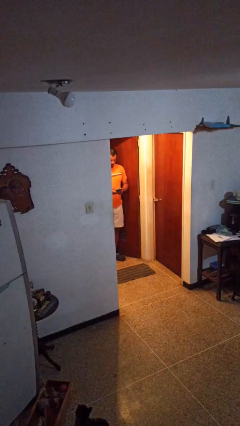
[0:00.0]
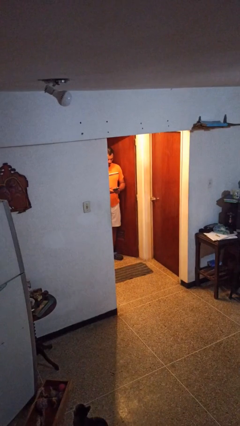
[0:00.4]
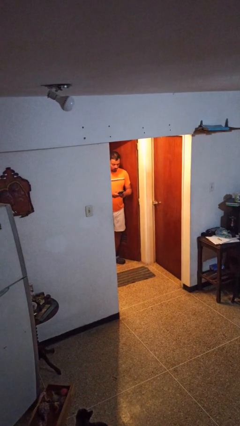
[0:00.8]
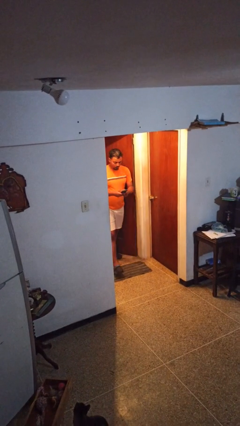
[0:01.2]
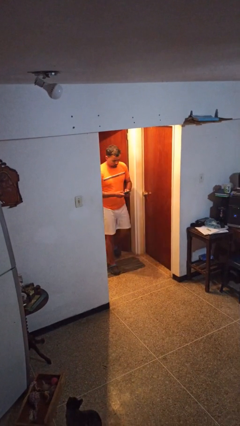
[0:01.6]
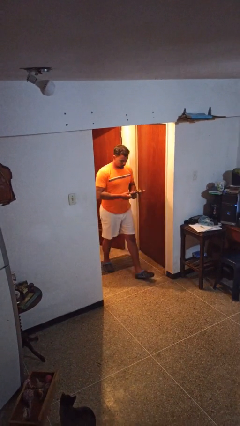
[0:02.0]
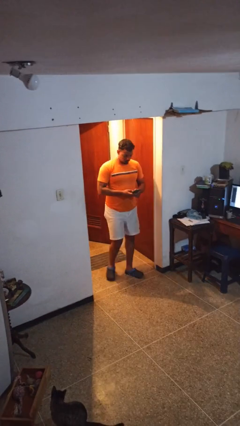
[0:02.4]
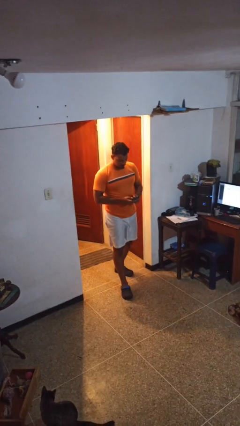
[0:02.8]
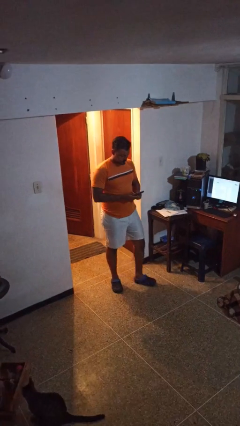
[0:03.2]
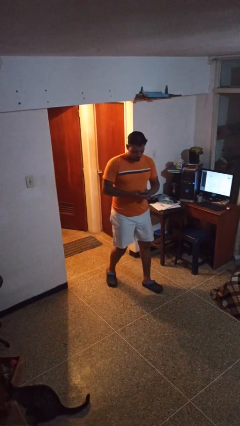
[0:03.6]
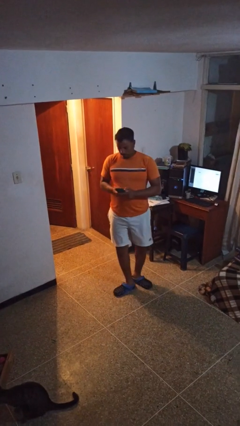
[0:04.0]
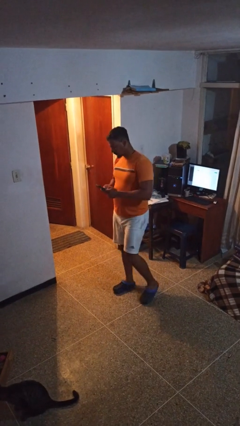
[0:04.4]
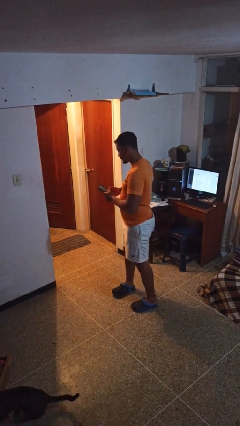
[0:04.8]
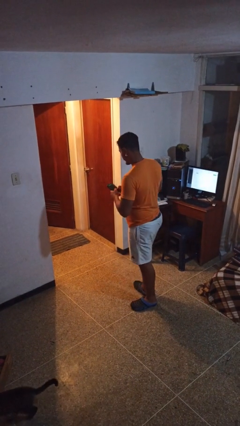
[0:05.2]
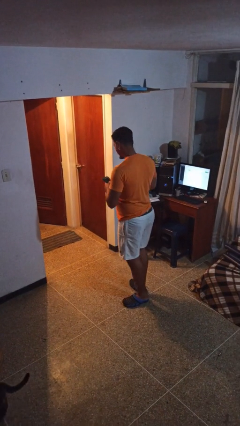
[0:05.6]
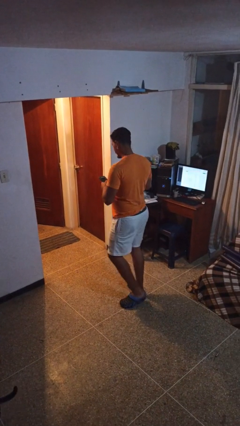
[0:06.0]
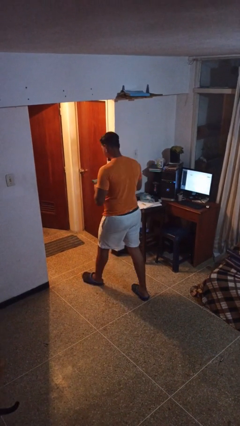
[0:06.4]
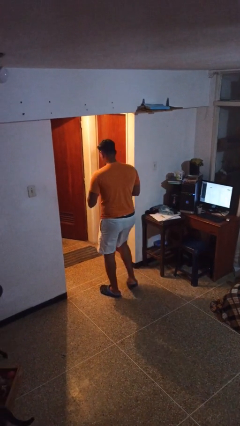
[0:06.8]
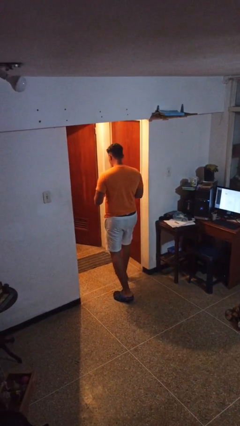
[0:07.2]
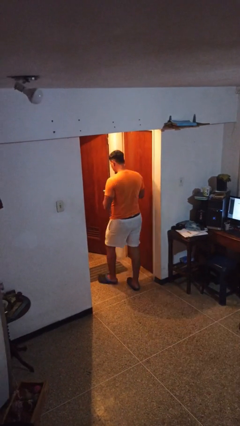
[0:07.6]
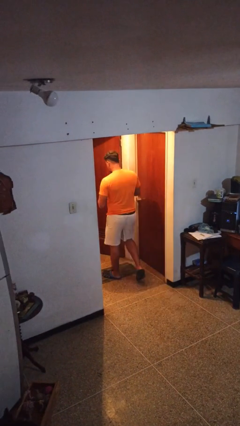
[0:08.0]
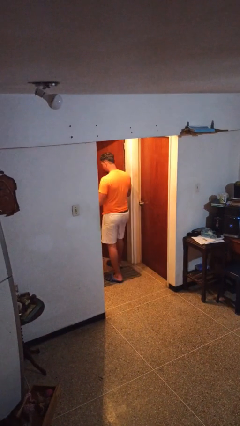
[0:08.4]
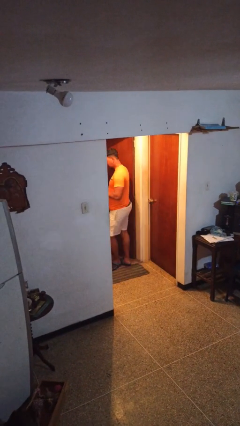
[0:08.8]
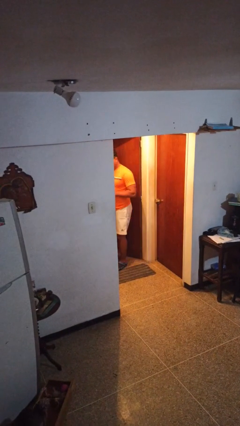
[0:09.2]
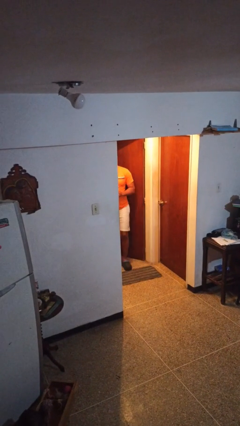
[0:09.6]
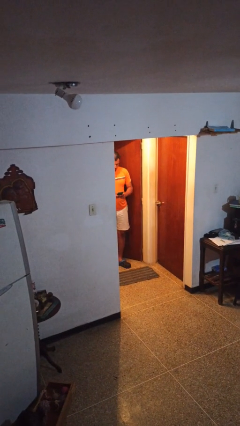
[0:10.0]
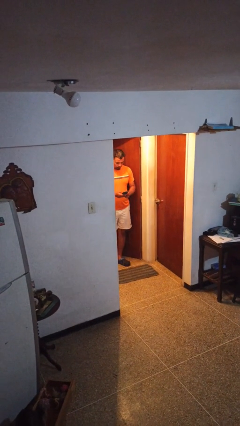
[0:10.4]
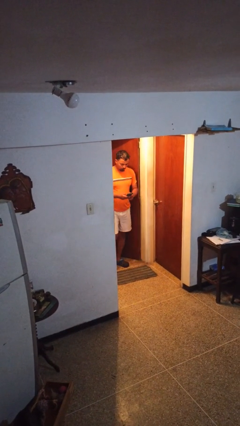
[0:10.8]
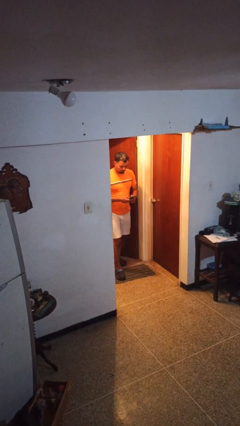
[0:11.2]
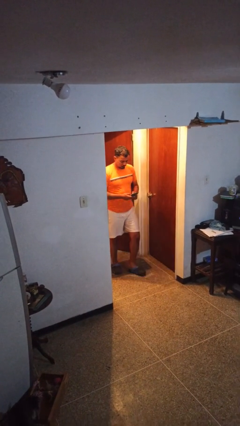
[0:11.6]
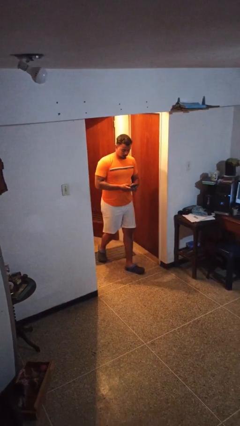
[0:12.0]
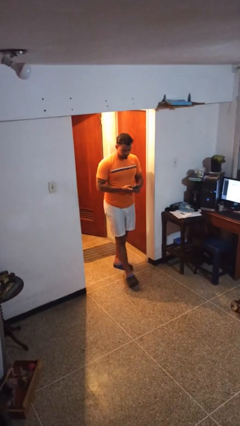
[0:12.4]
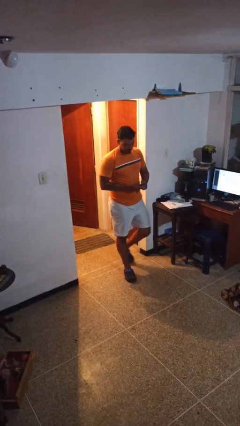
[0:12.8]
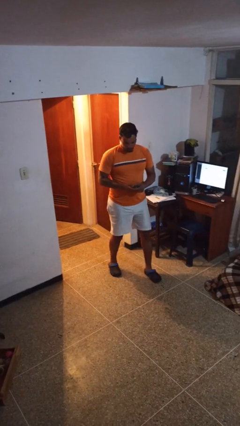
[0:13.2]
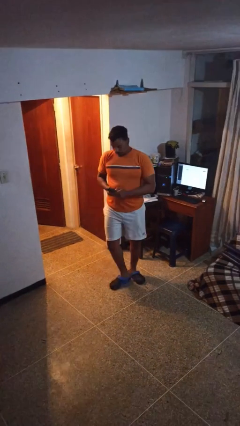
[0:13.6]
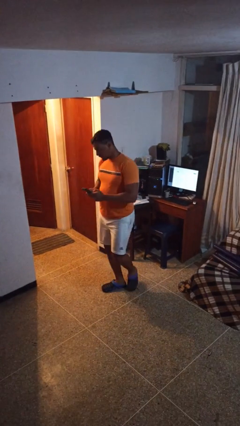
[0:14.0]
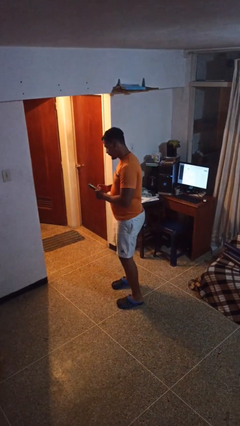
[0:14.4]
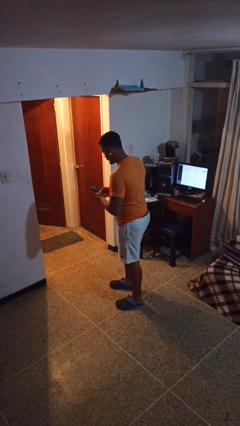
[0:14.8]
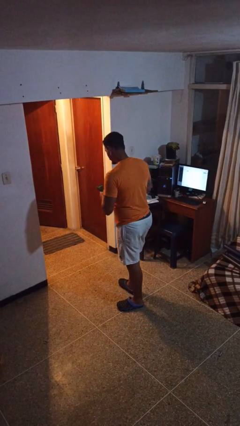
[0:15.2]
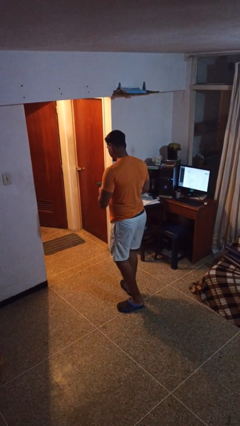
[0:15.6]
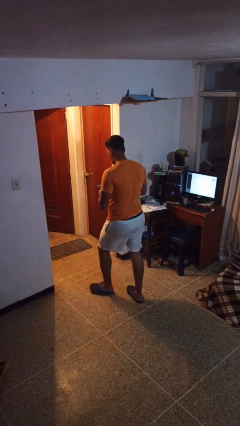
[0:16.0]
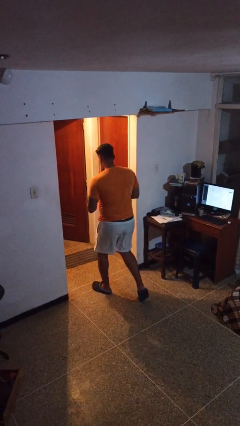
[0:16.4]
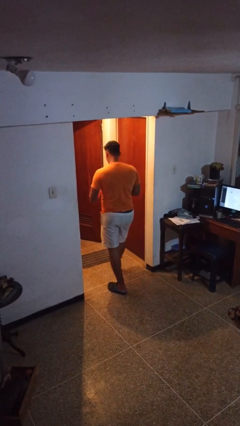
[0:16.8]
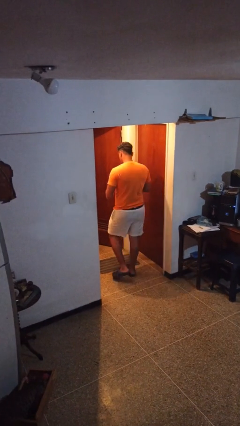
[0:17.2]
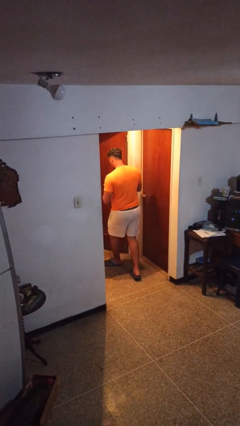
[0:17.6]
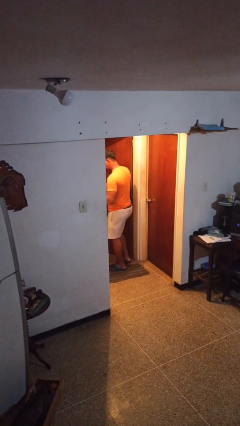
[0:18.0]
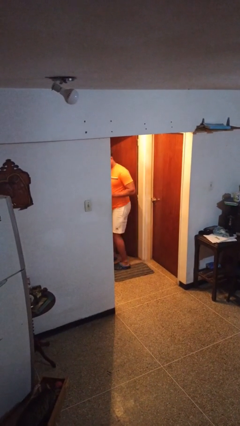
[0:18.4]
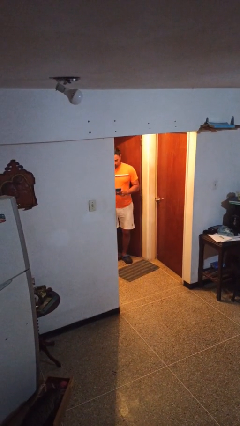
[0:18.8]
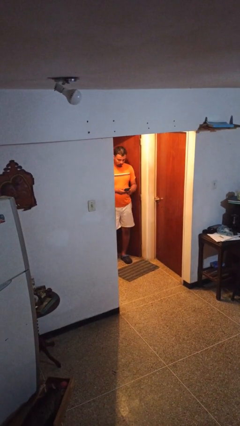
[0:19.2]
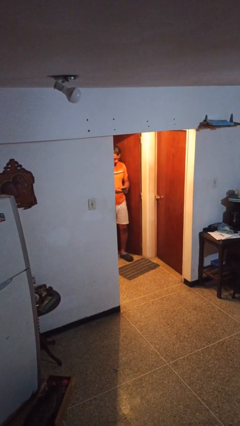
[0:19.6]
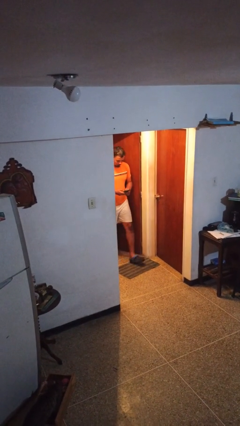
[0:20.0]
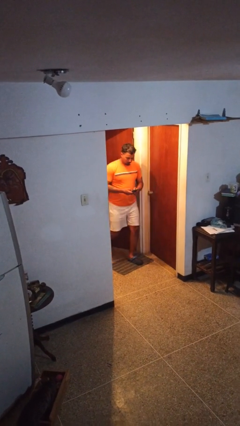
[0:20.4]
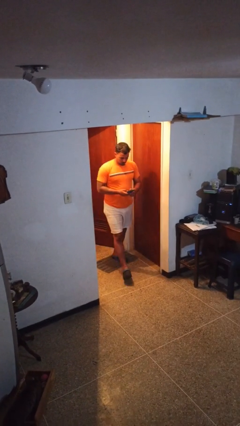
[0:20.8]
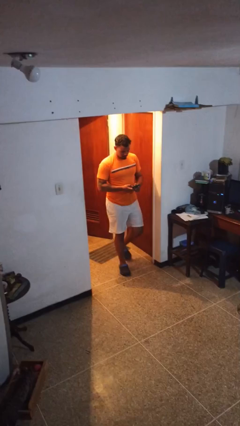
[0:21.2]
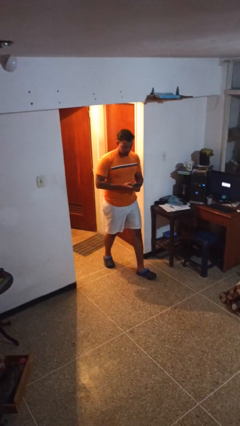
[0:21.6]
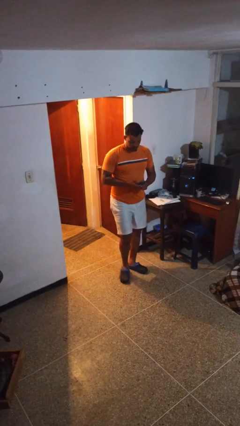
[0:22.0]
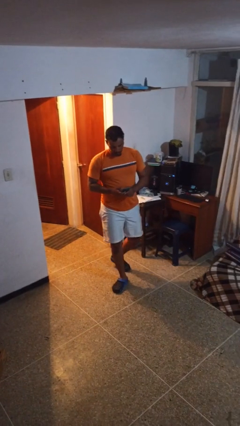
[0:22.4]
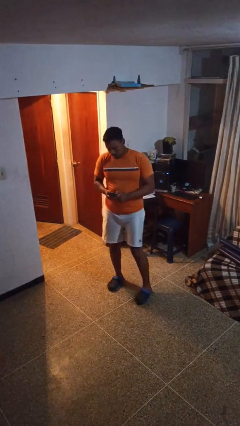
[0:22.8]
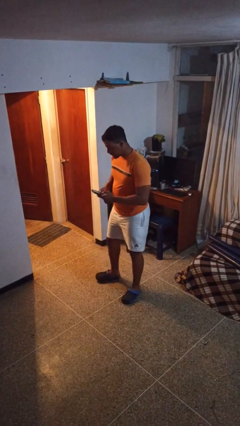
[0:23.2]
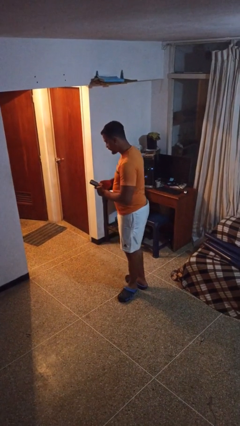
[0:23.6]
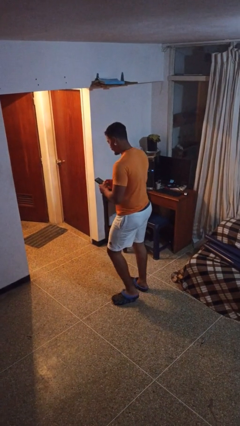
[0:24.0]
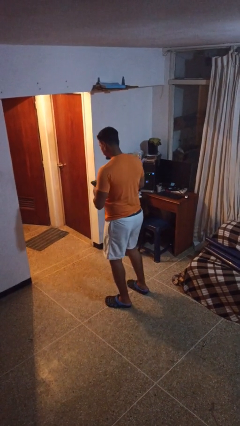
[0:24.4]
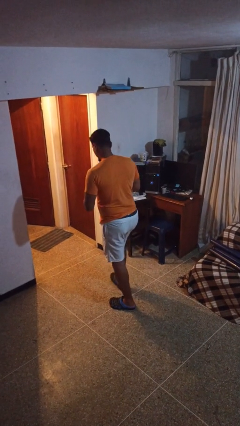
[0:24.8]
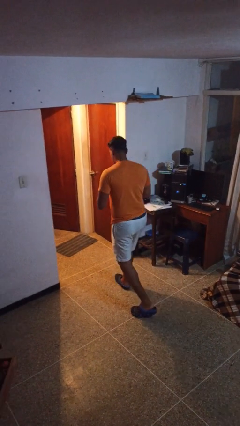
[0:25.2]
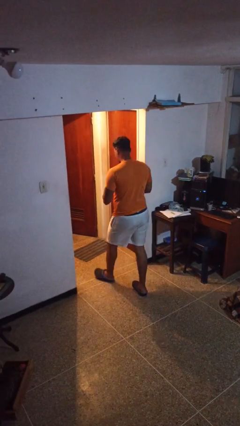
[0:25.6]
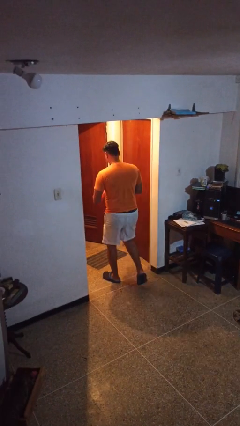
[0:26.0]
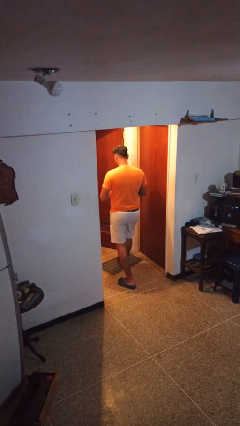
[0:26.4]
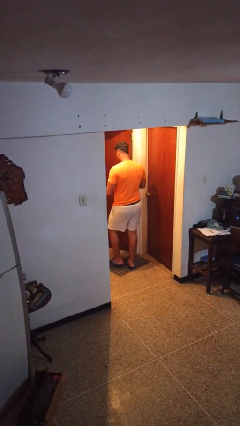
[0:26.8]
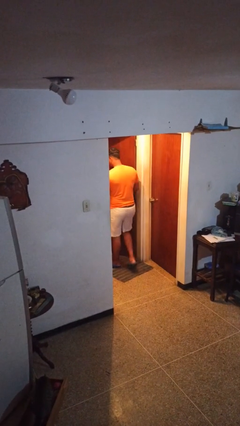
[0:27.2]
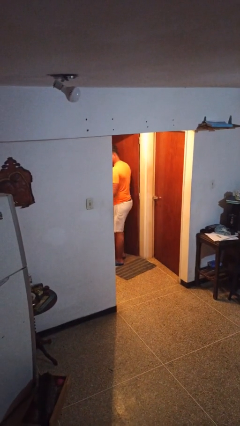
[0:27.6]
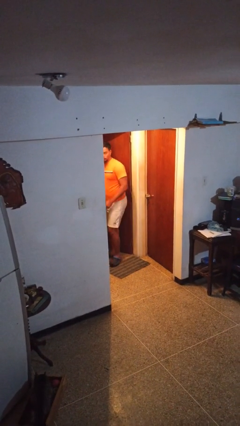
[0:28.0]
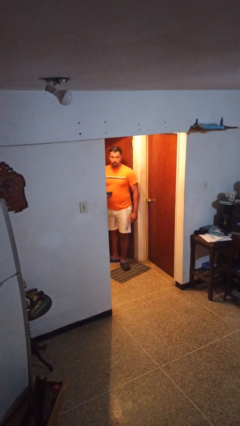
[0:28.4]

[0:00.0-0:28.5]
person texts on phone

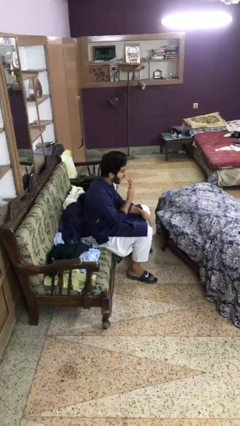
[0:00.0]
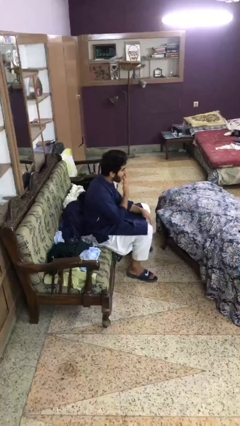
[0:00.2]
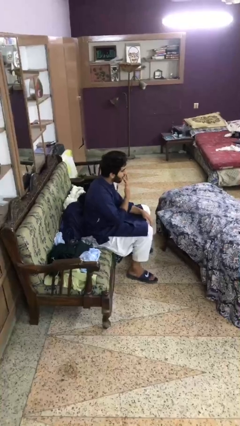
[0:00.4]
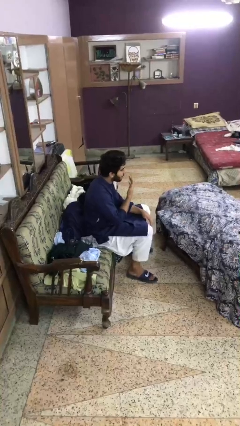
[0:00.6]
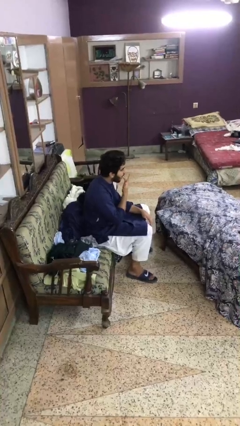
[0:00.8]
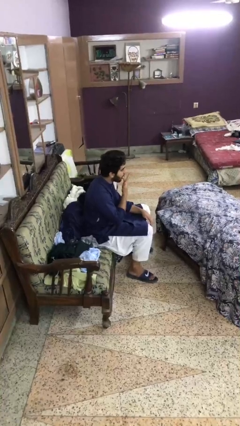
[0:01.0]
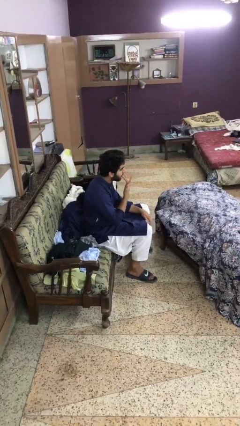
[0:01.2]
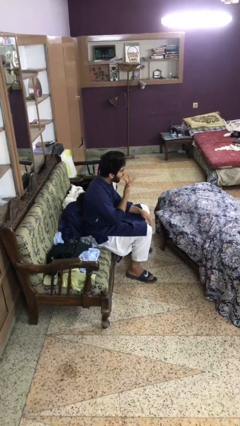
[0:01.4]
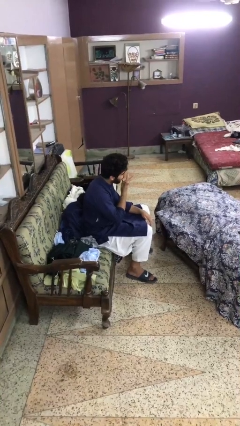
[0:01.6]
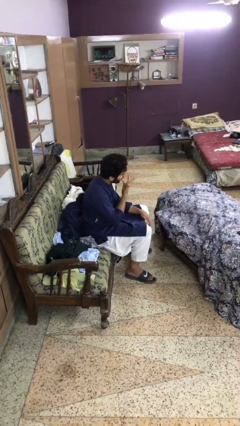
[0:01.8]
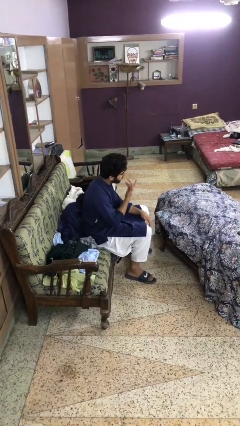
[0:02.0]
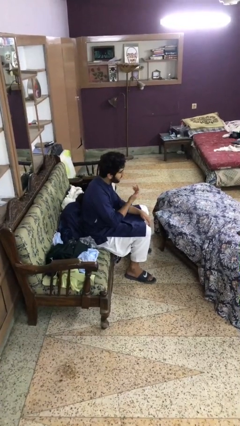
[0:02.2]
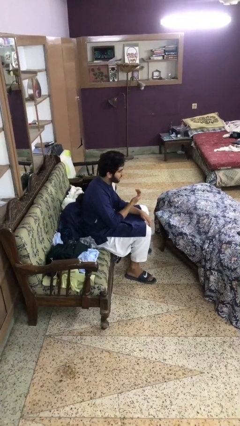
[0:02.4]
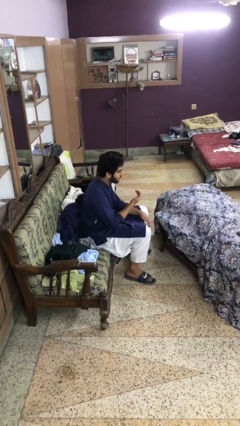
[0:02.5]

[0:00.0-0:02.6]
person licks fingers

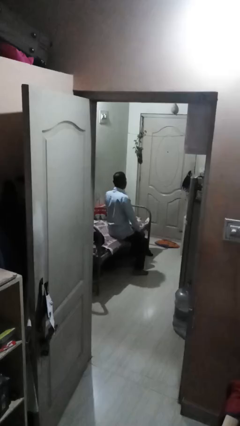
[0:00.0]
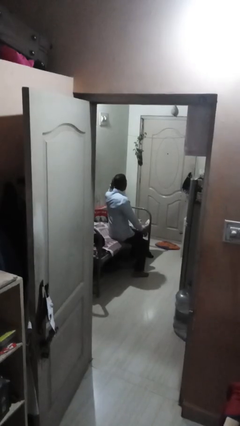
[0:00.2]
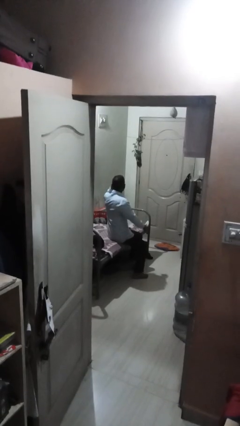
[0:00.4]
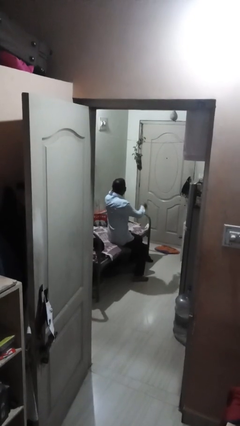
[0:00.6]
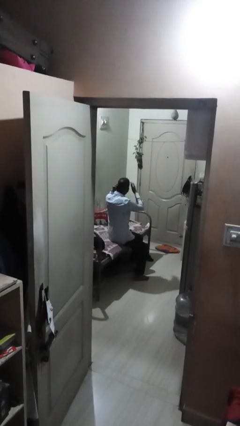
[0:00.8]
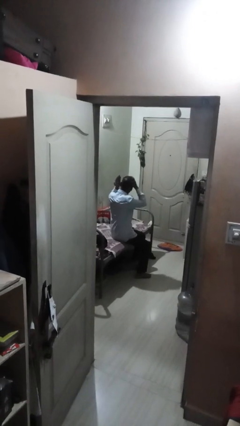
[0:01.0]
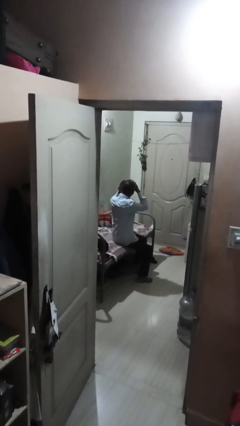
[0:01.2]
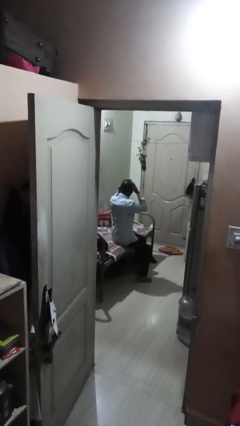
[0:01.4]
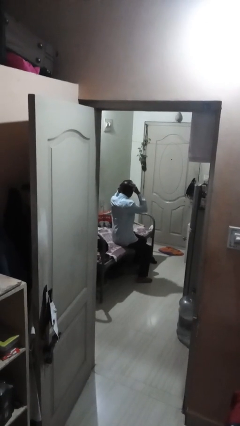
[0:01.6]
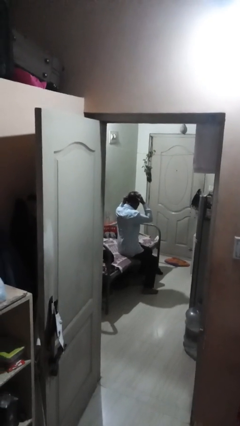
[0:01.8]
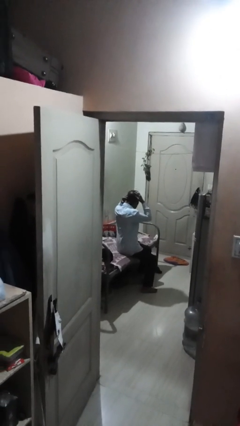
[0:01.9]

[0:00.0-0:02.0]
person strokes hair
